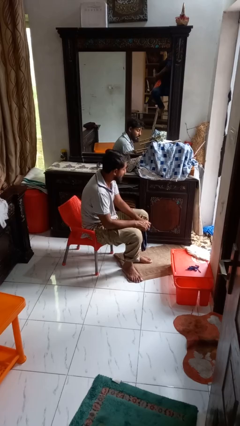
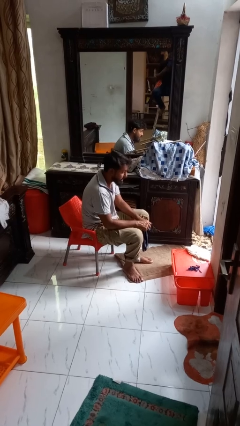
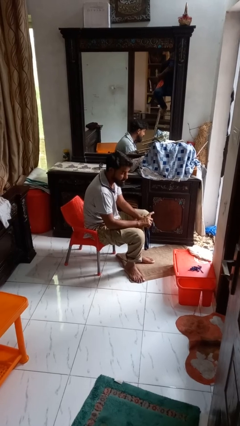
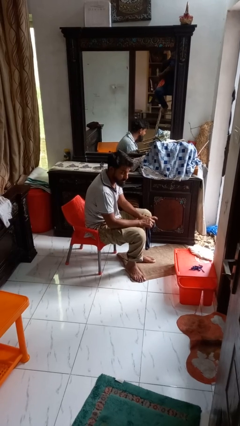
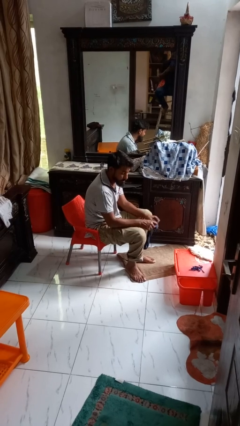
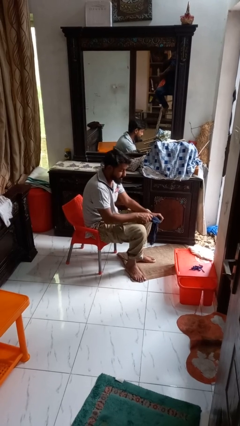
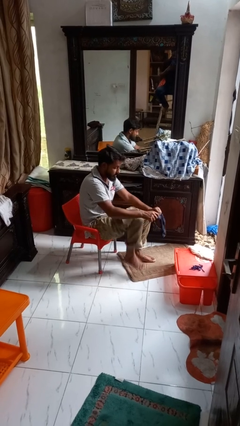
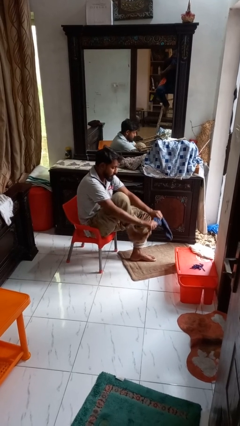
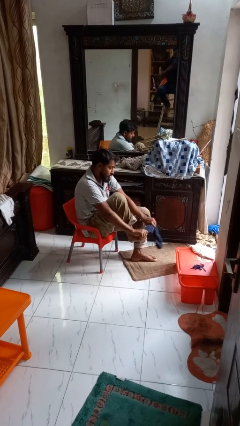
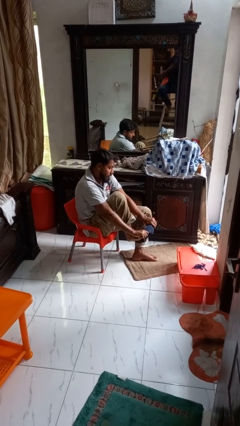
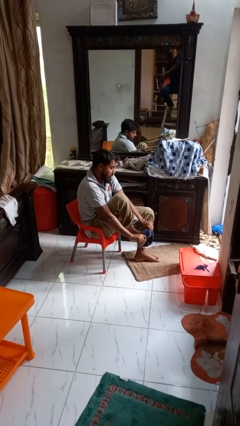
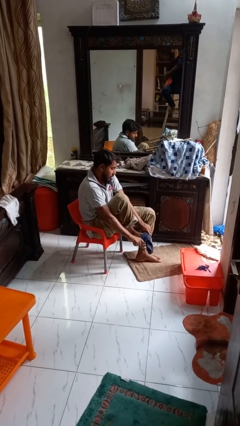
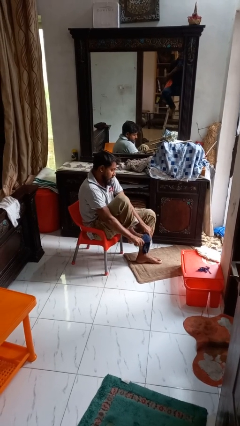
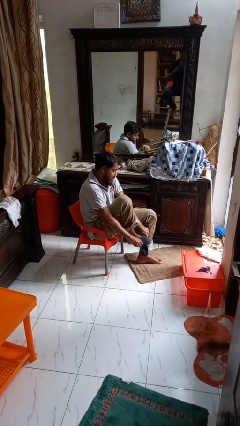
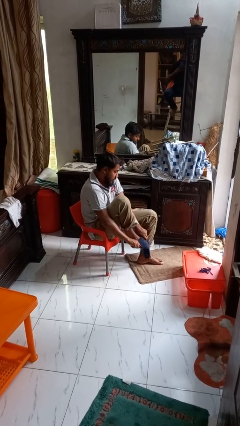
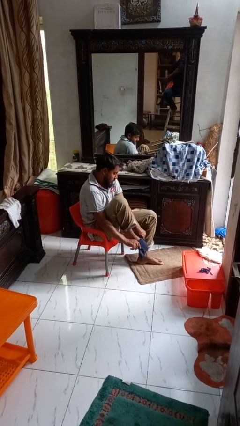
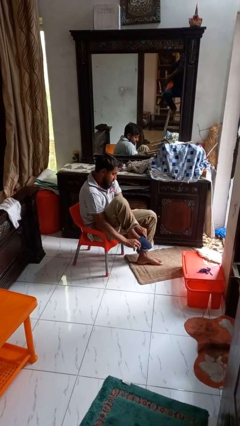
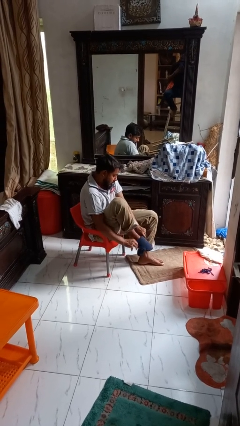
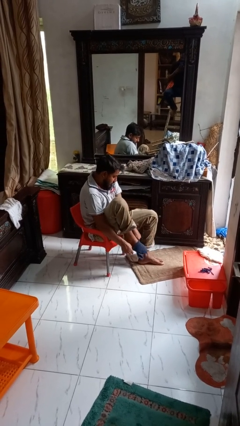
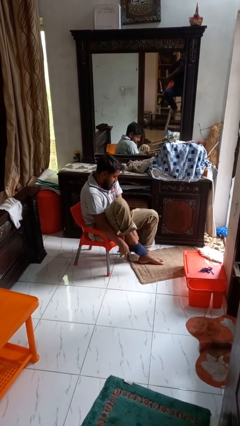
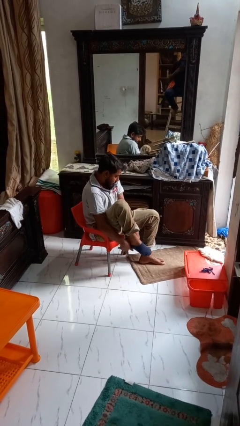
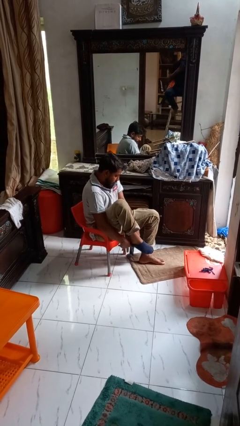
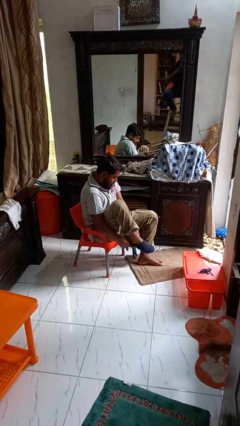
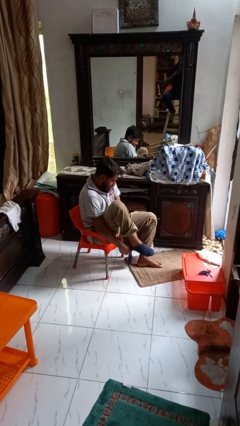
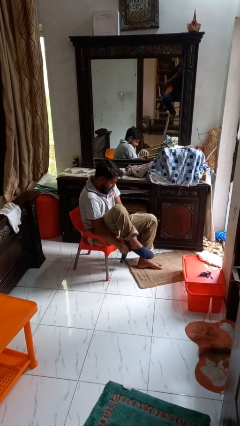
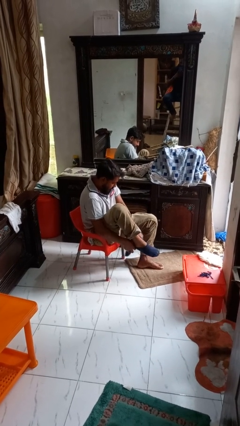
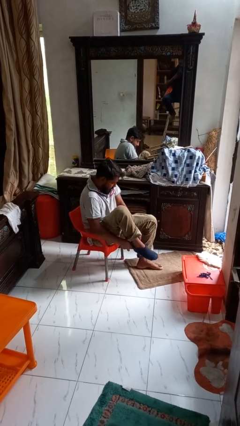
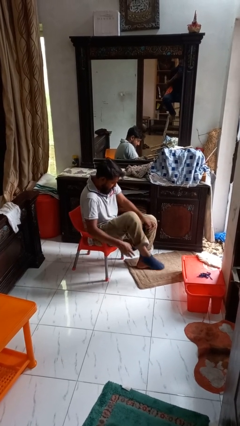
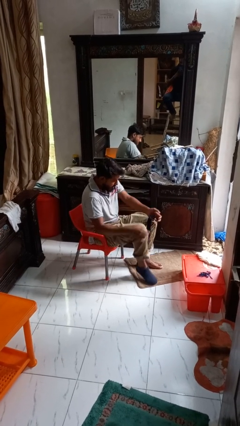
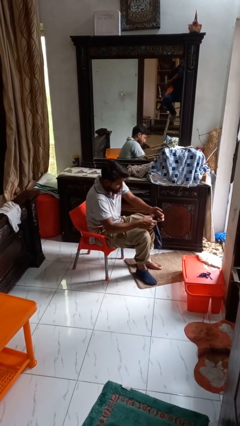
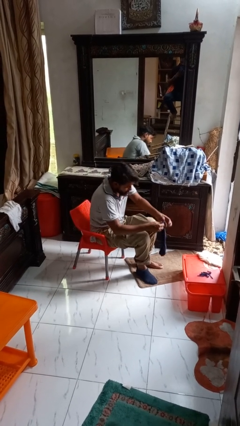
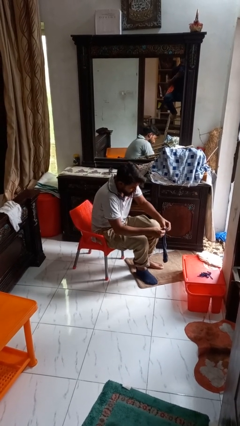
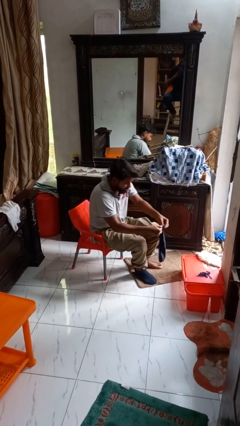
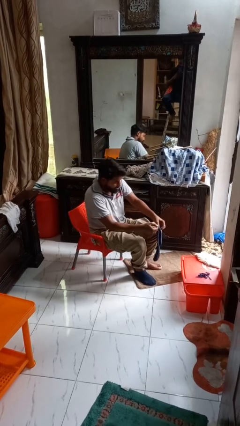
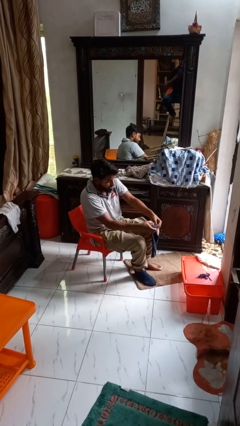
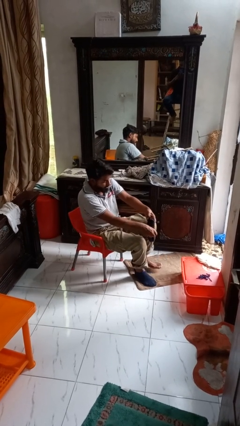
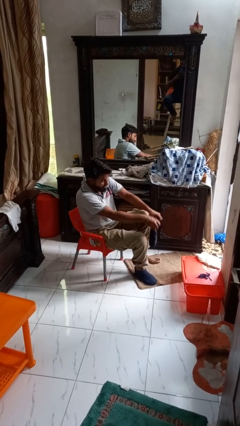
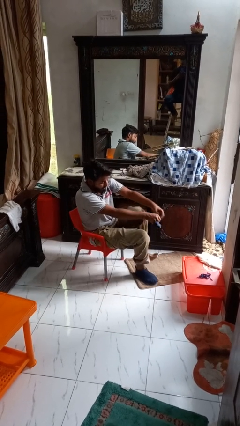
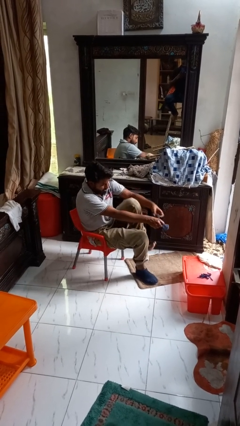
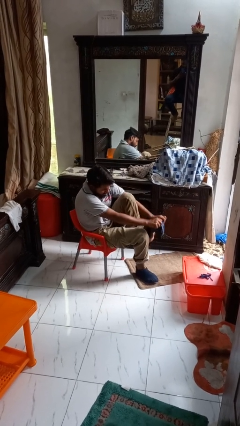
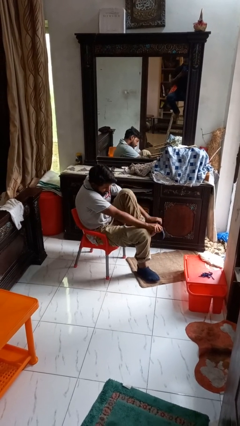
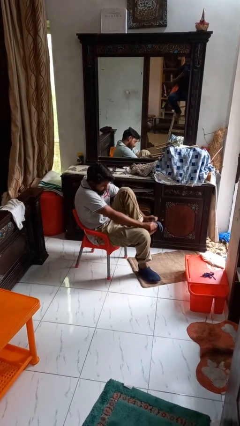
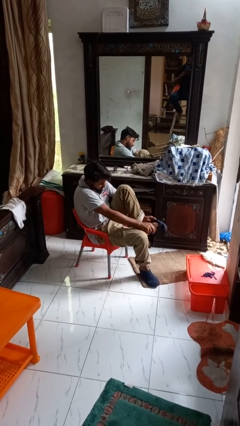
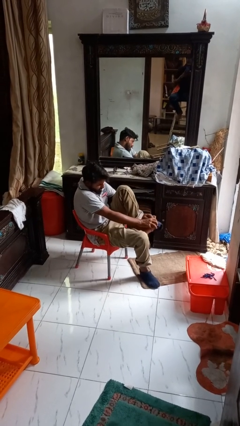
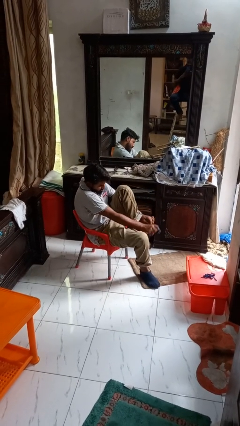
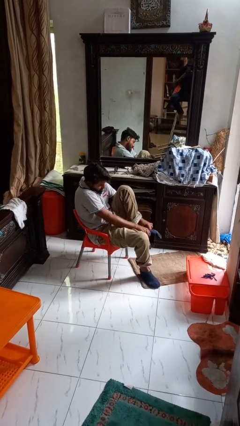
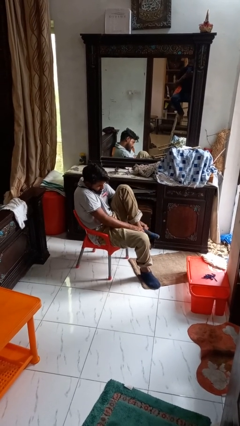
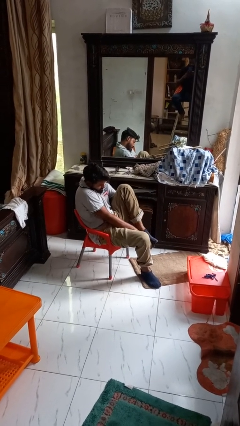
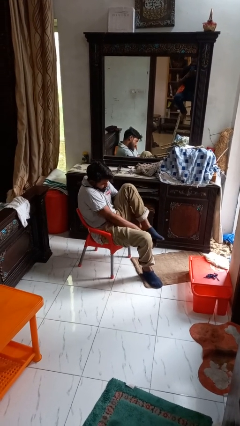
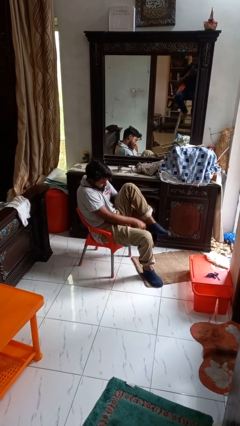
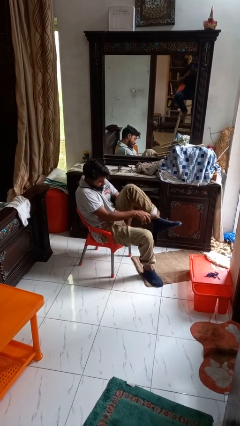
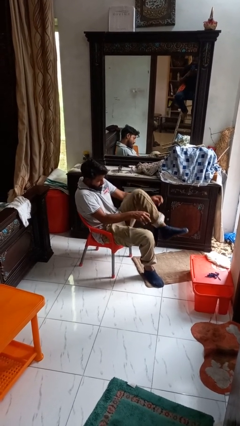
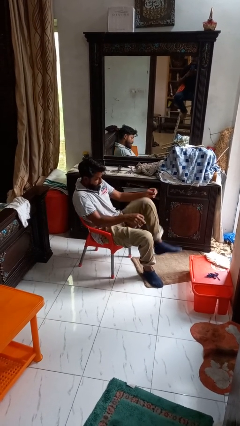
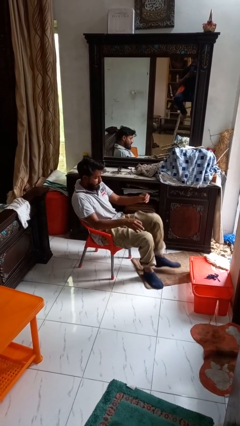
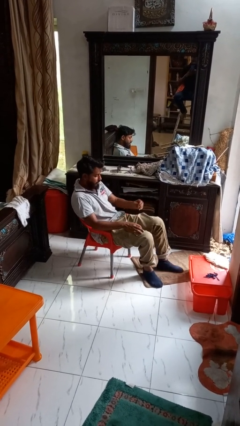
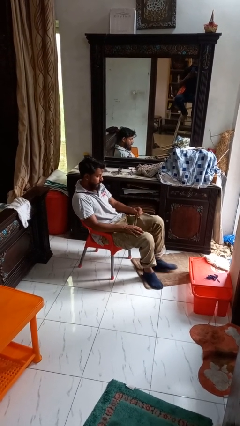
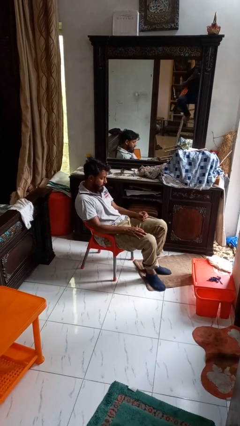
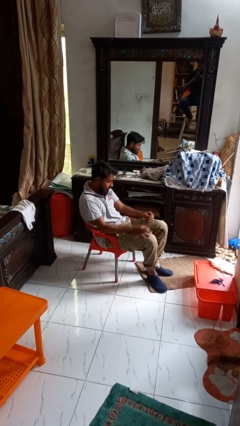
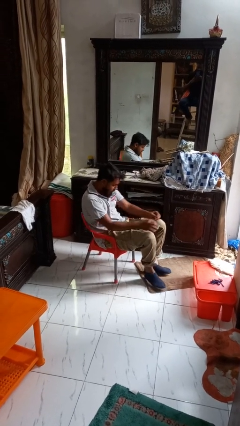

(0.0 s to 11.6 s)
person puts on socks

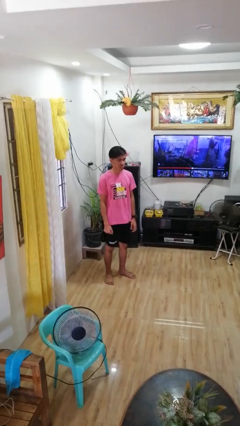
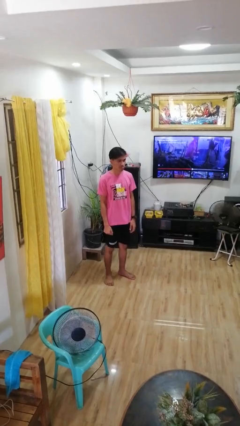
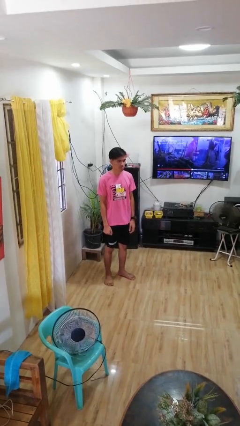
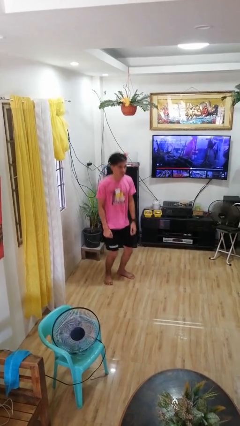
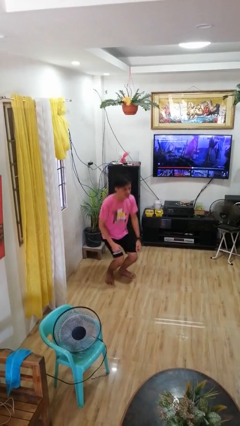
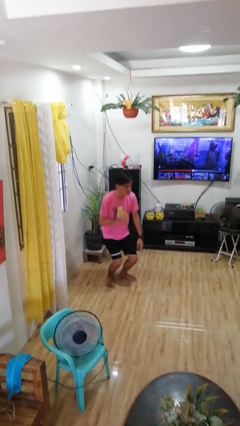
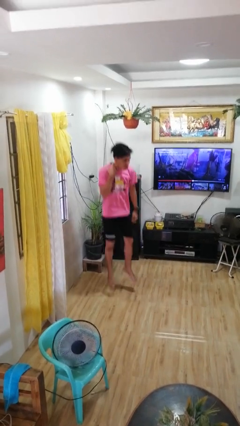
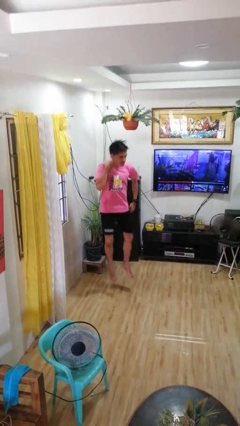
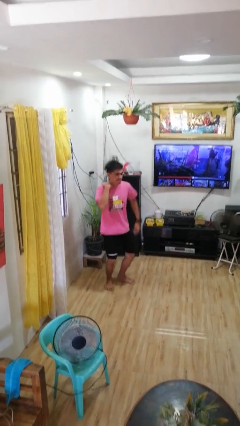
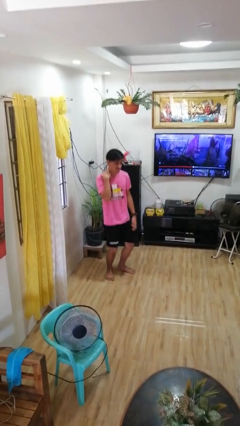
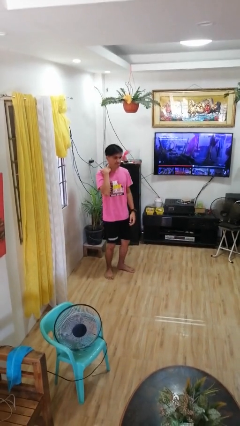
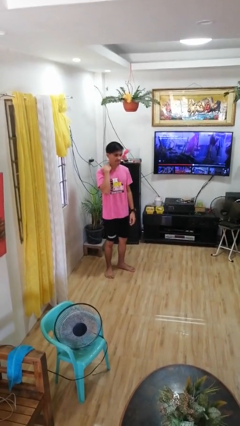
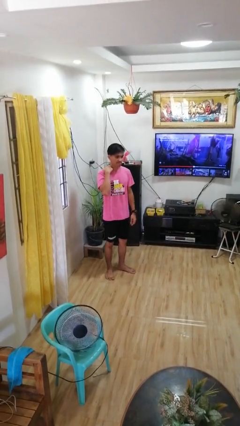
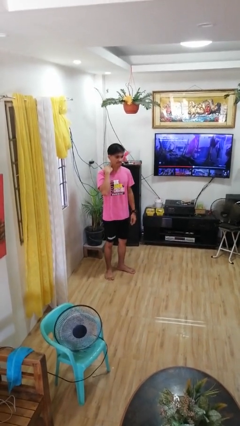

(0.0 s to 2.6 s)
person jumps

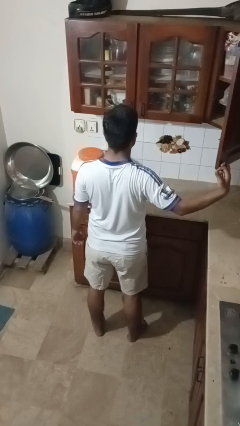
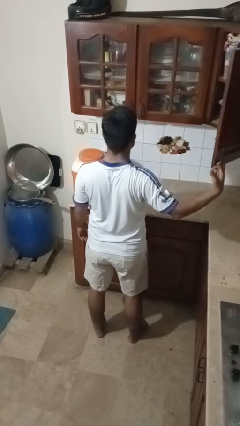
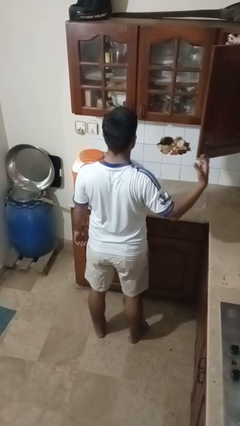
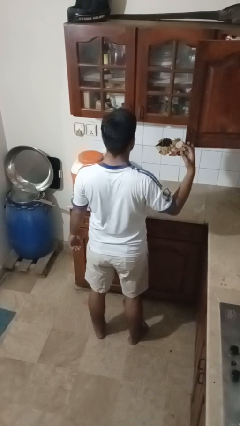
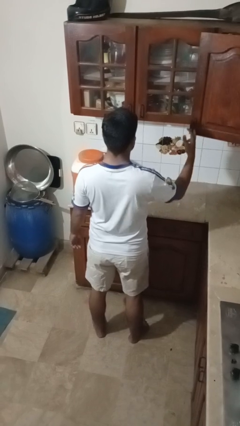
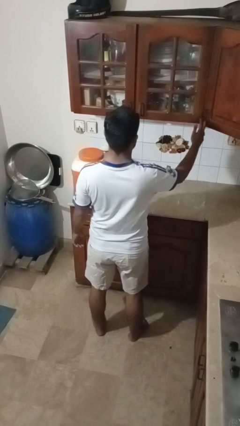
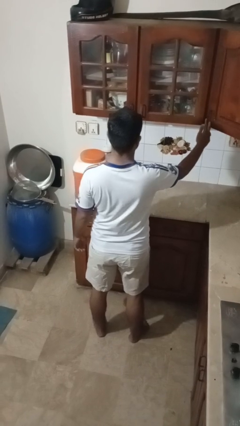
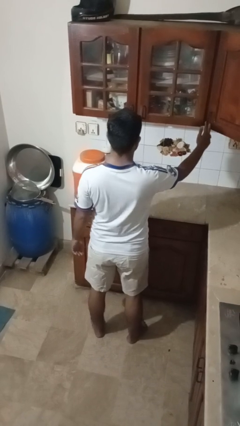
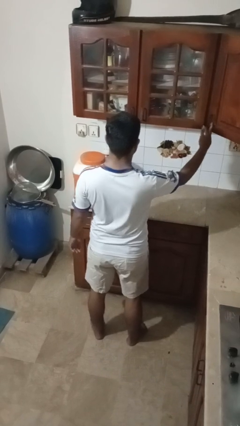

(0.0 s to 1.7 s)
person closes cabinet

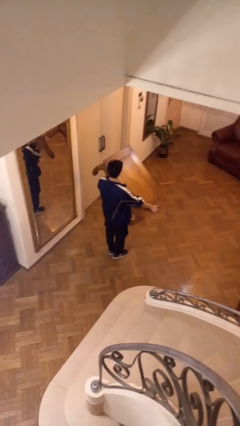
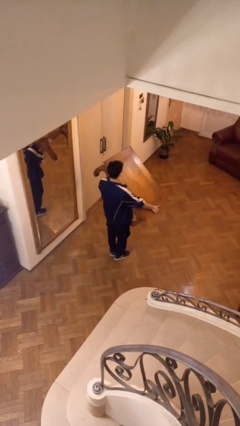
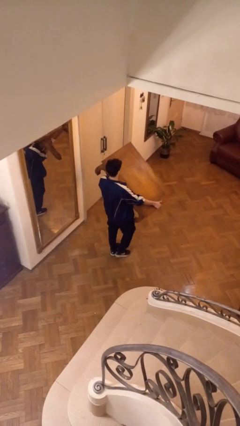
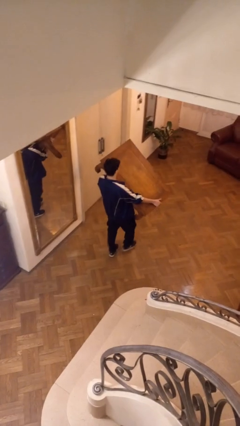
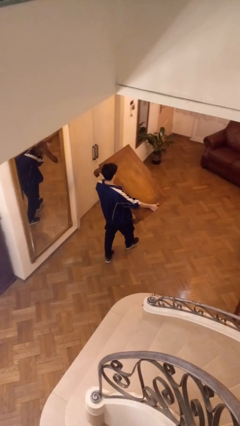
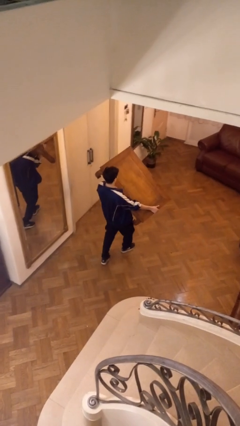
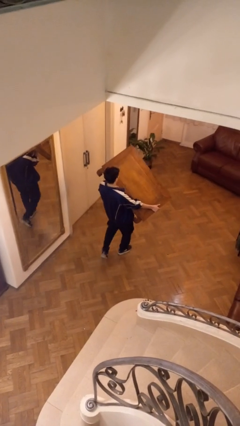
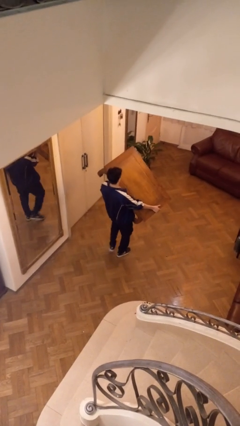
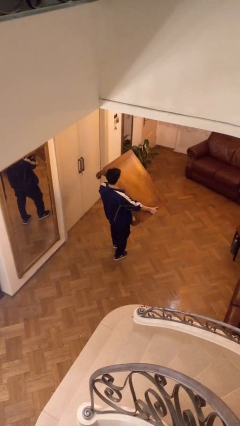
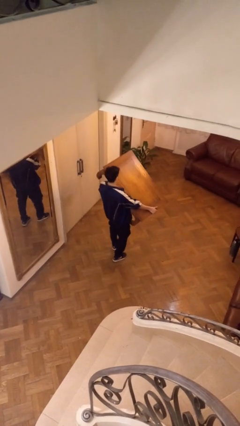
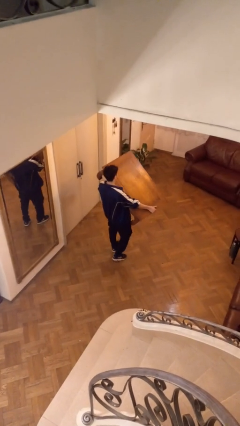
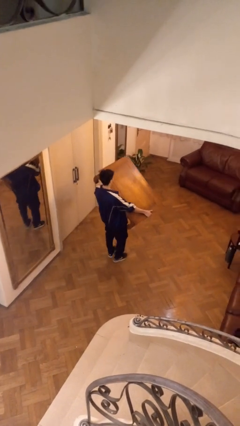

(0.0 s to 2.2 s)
person carries furniture
